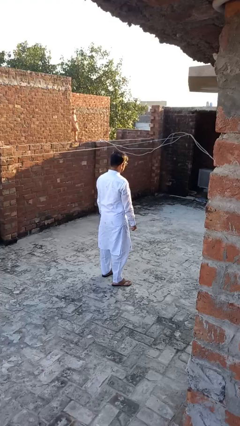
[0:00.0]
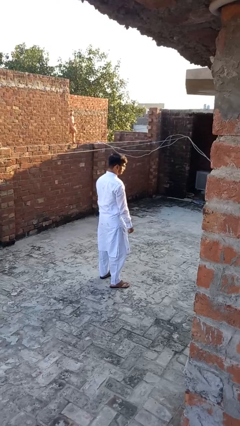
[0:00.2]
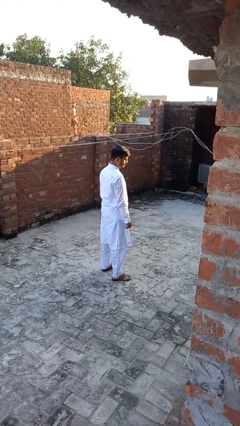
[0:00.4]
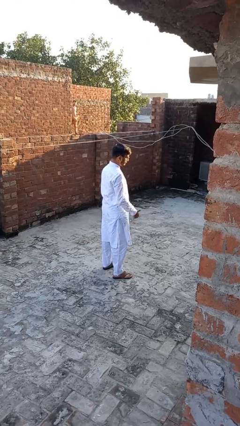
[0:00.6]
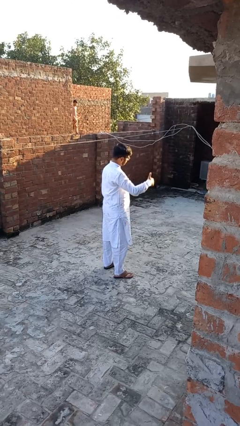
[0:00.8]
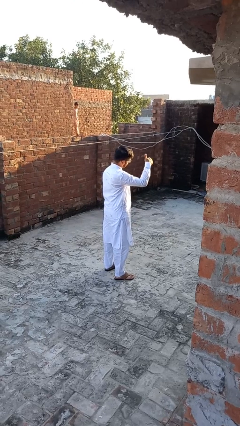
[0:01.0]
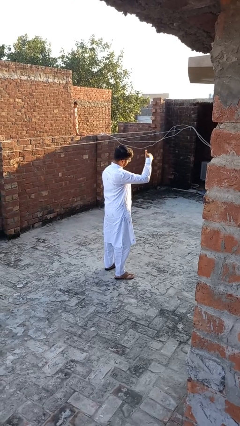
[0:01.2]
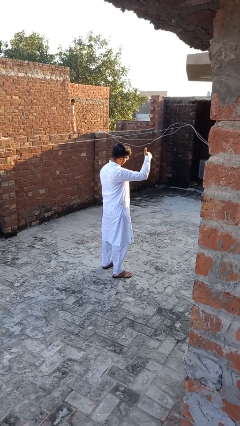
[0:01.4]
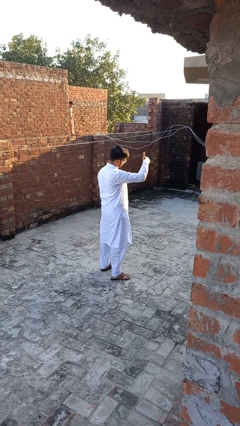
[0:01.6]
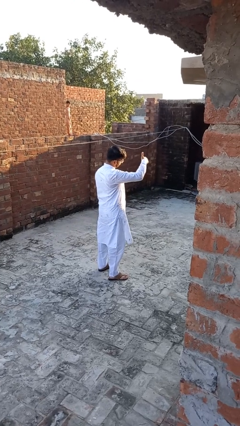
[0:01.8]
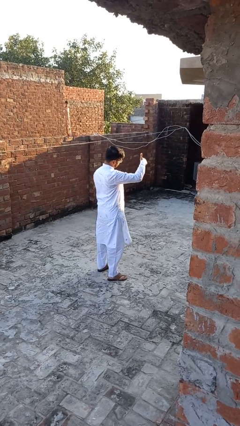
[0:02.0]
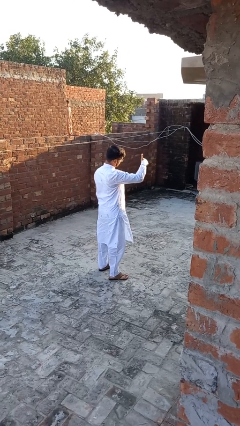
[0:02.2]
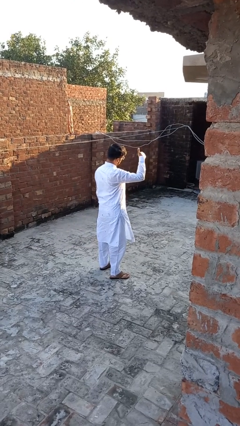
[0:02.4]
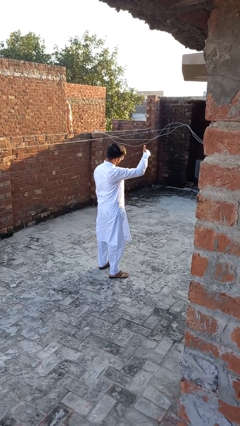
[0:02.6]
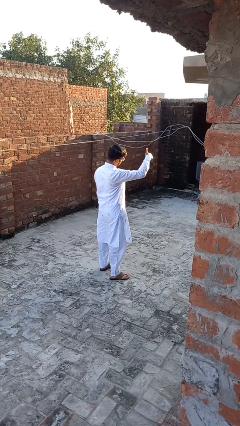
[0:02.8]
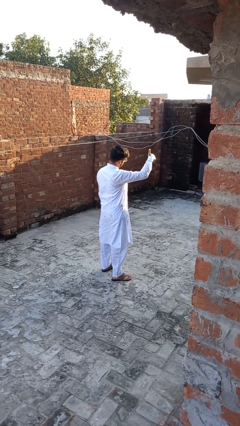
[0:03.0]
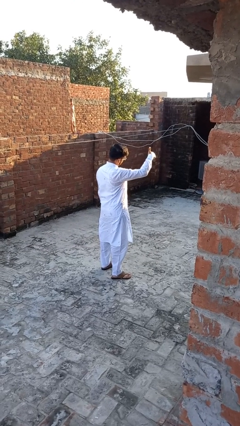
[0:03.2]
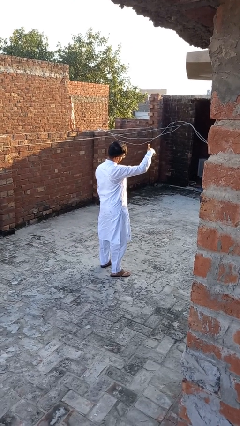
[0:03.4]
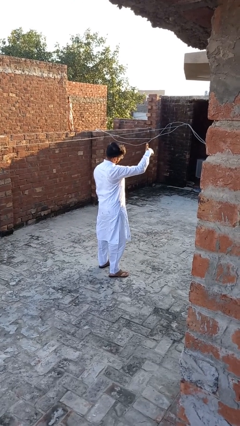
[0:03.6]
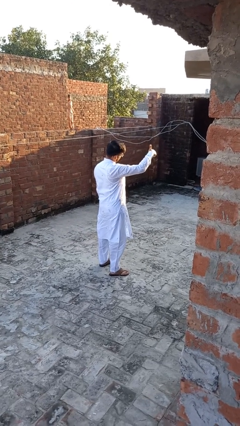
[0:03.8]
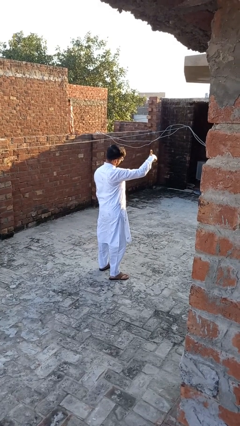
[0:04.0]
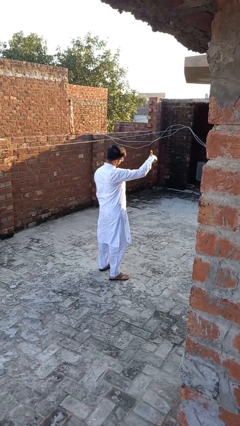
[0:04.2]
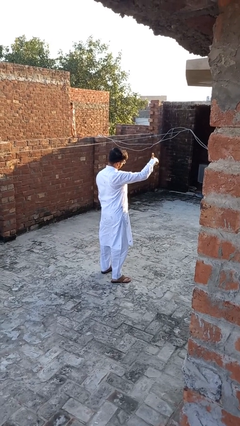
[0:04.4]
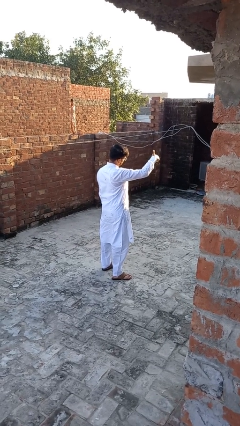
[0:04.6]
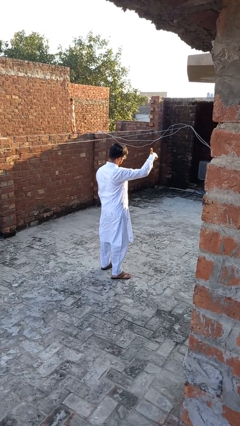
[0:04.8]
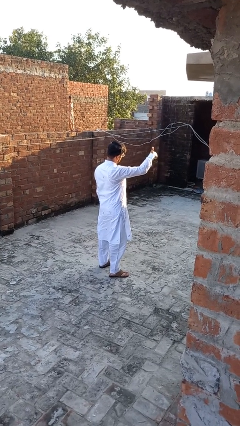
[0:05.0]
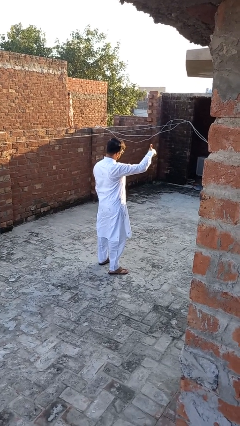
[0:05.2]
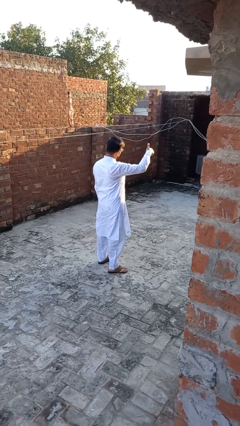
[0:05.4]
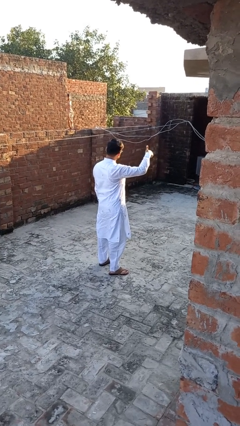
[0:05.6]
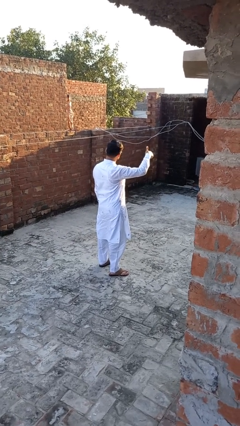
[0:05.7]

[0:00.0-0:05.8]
person gestures thumbs up

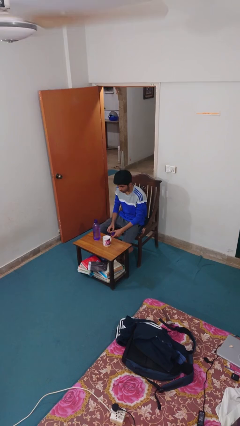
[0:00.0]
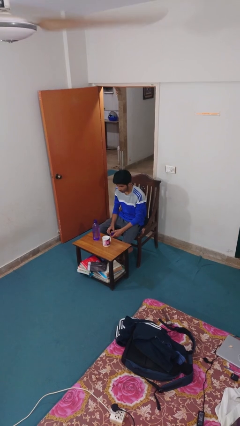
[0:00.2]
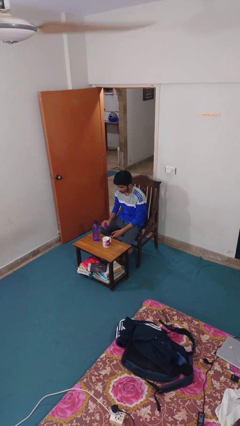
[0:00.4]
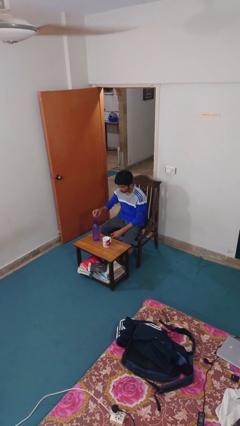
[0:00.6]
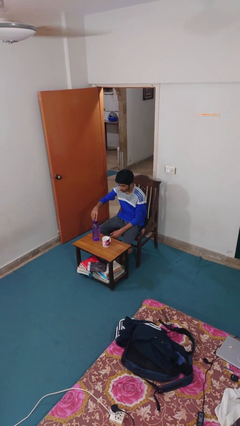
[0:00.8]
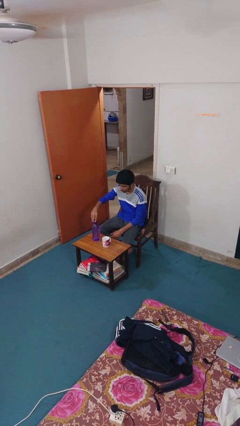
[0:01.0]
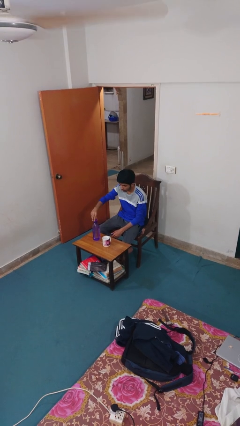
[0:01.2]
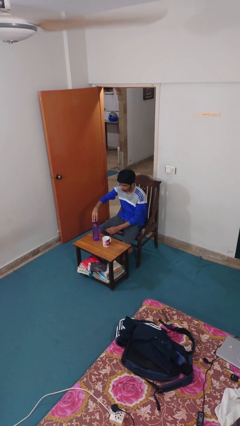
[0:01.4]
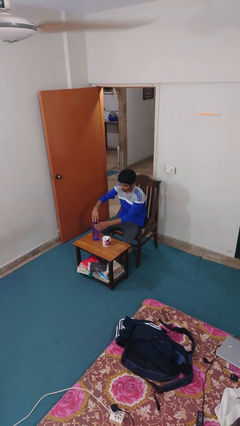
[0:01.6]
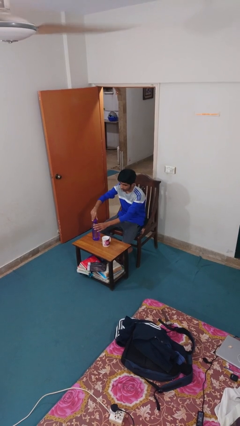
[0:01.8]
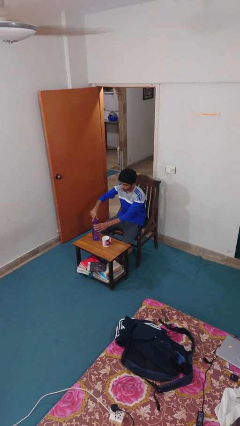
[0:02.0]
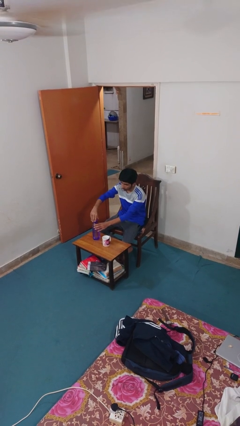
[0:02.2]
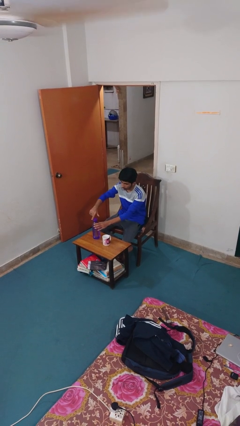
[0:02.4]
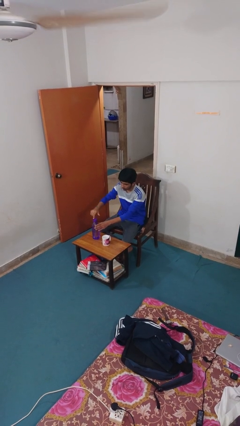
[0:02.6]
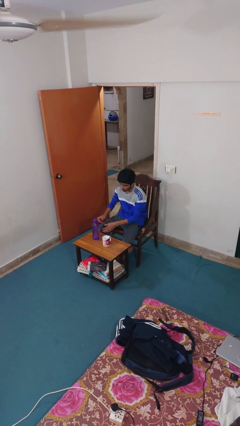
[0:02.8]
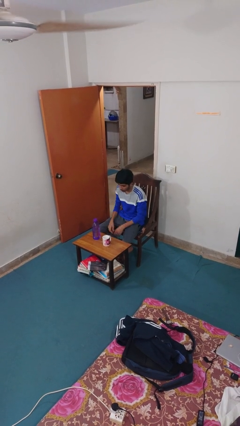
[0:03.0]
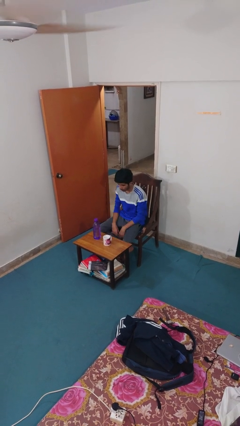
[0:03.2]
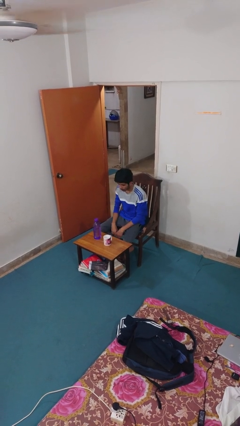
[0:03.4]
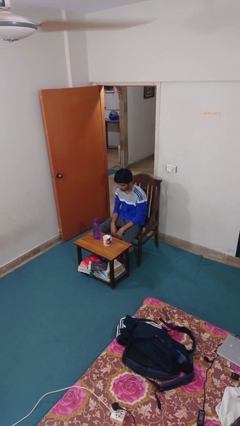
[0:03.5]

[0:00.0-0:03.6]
person screws lid to bottle

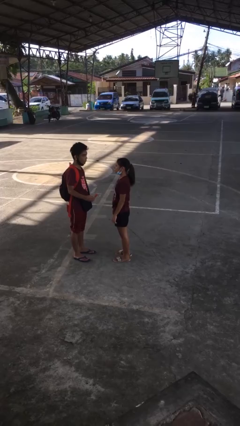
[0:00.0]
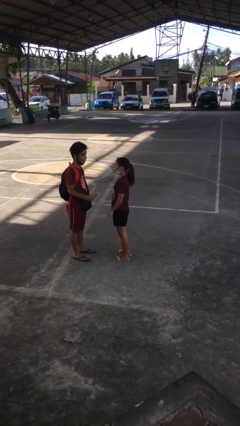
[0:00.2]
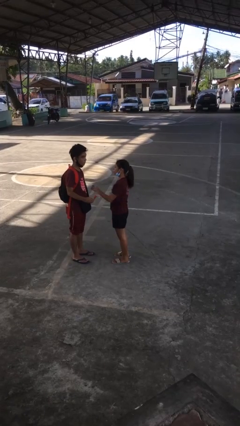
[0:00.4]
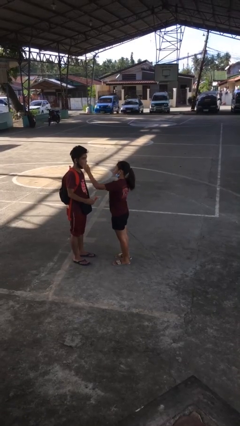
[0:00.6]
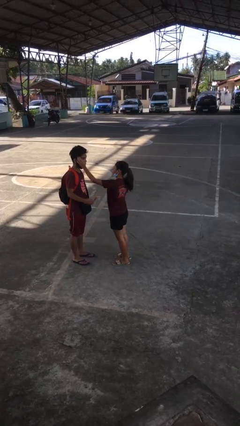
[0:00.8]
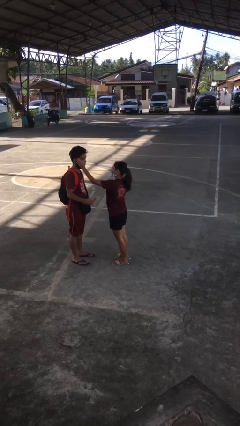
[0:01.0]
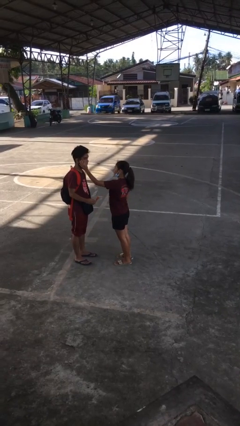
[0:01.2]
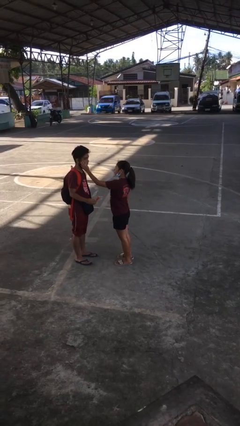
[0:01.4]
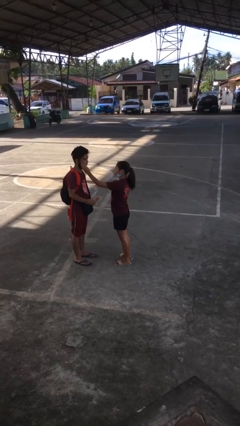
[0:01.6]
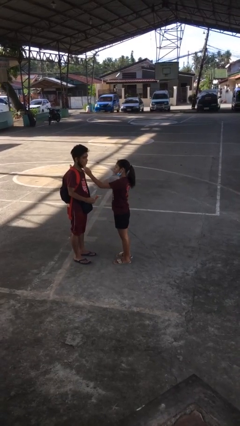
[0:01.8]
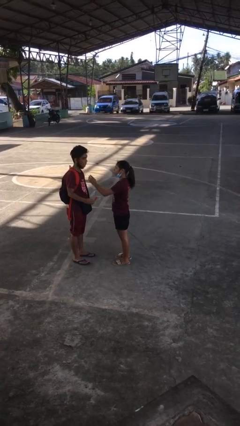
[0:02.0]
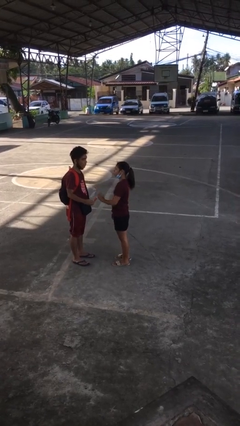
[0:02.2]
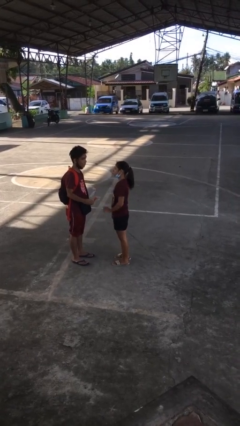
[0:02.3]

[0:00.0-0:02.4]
person touches face of person

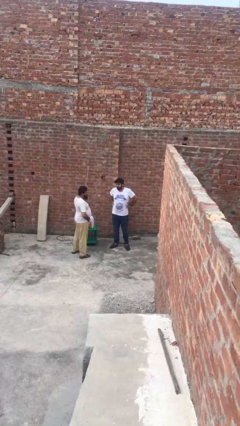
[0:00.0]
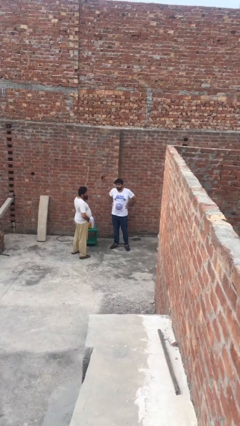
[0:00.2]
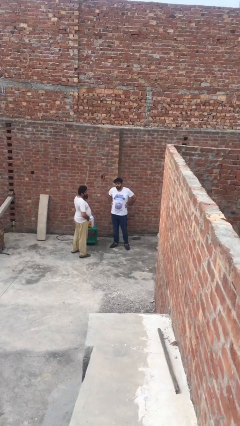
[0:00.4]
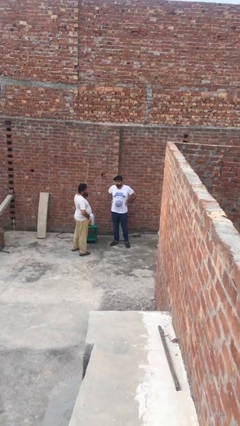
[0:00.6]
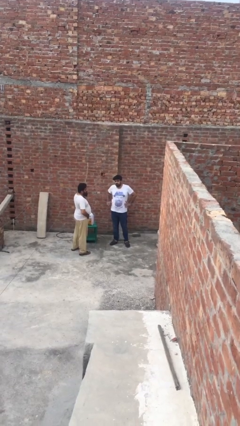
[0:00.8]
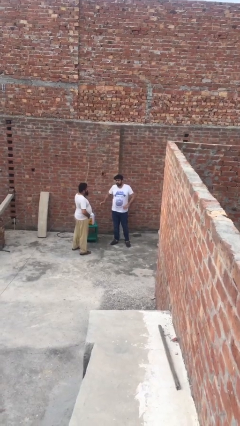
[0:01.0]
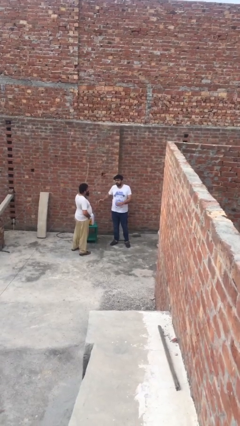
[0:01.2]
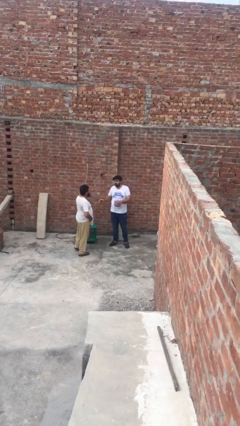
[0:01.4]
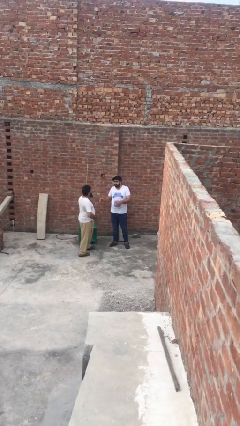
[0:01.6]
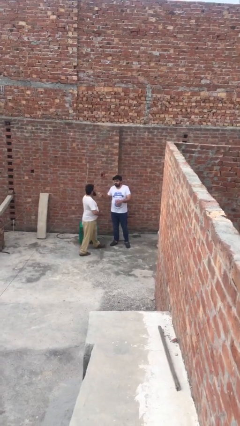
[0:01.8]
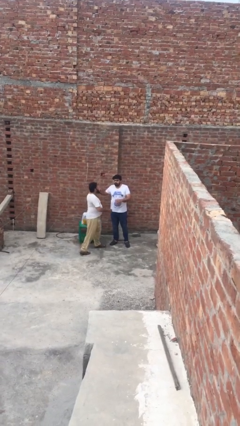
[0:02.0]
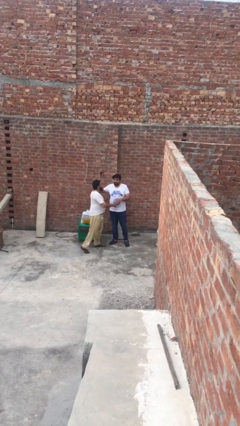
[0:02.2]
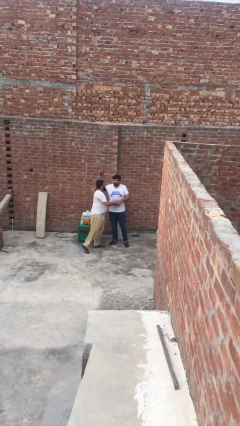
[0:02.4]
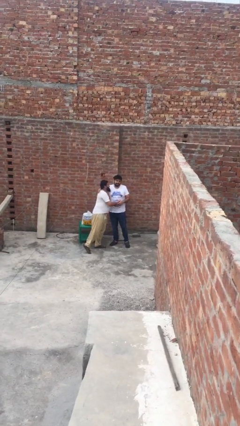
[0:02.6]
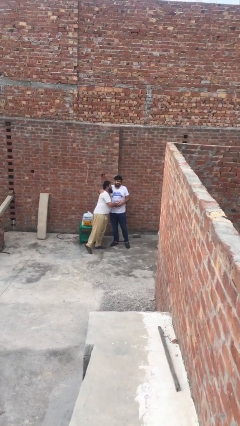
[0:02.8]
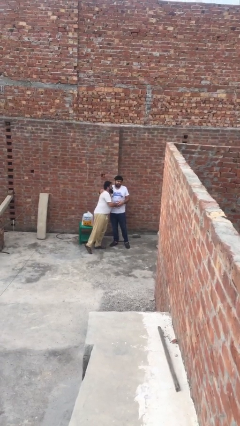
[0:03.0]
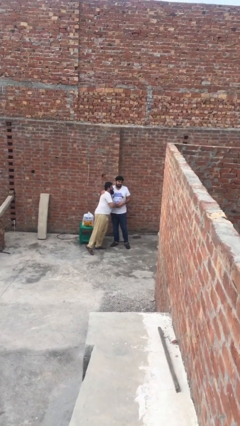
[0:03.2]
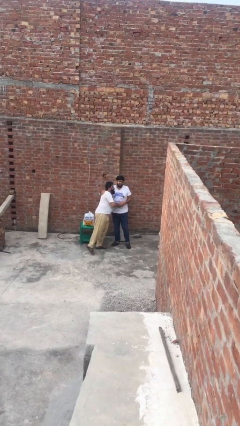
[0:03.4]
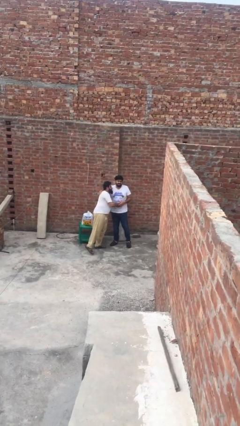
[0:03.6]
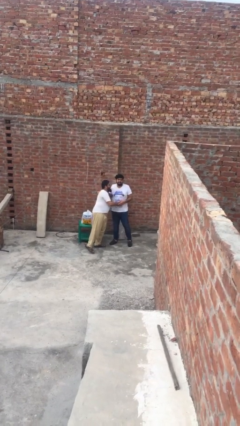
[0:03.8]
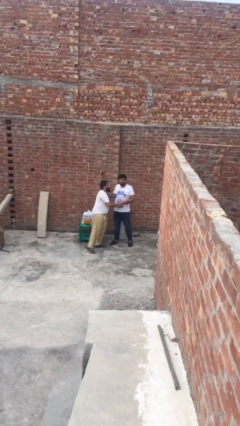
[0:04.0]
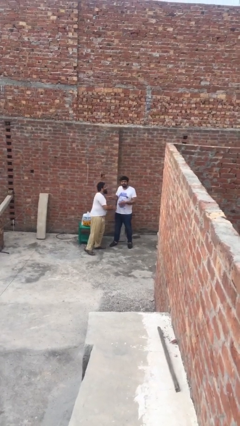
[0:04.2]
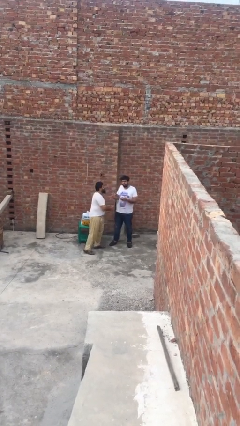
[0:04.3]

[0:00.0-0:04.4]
person embraces person

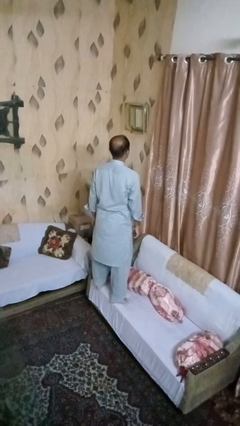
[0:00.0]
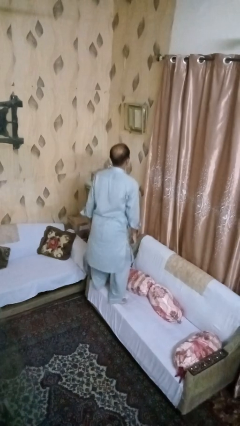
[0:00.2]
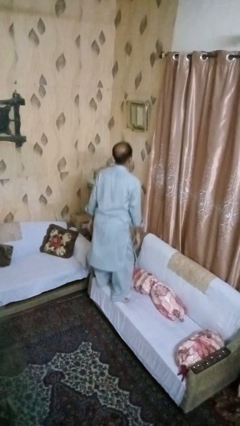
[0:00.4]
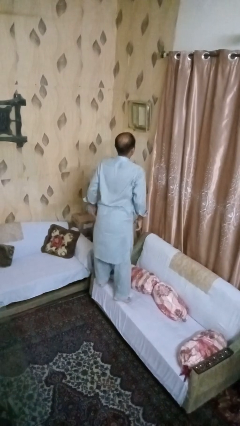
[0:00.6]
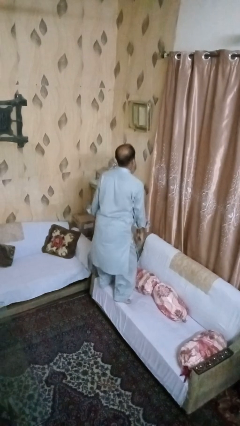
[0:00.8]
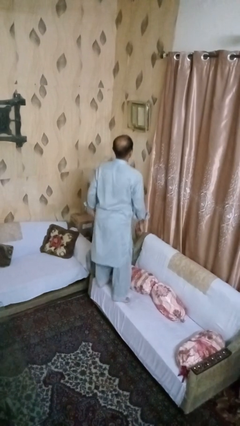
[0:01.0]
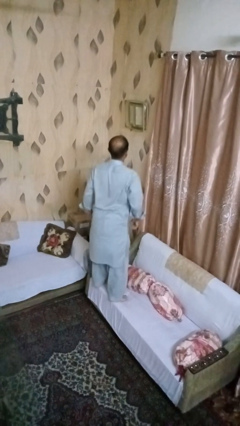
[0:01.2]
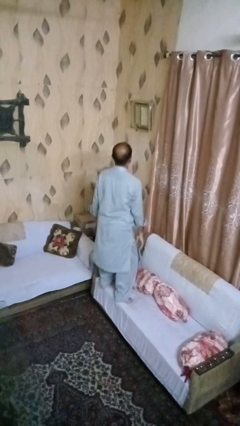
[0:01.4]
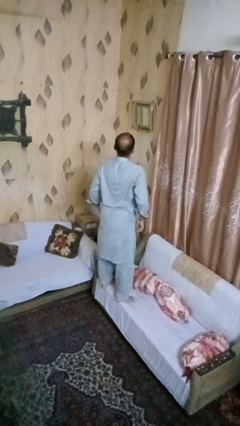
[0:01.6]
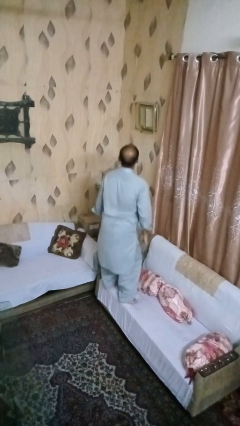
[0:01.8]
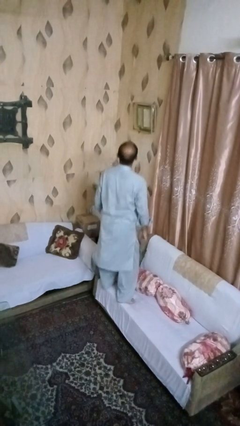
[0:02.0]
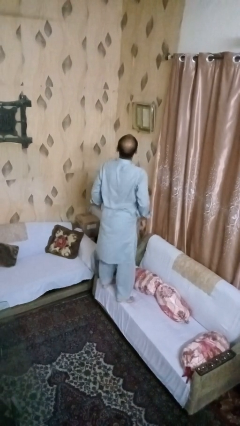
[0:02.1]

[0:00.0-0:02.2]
person jumps on couch
